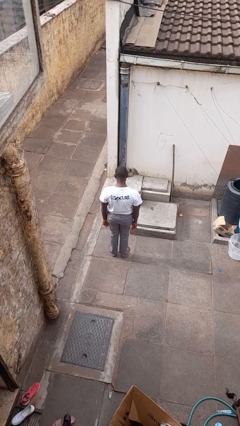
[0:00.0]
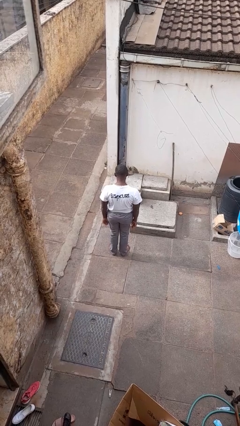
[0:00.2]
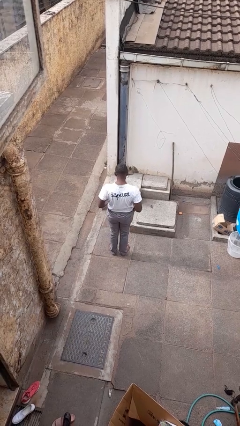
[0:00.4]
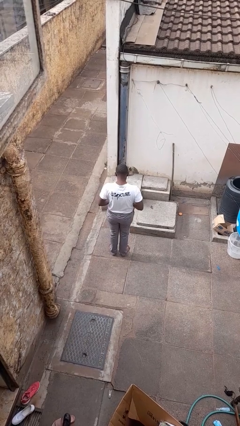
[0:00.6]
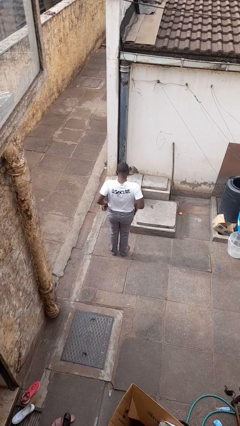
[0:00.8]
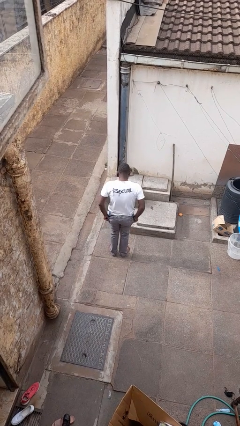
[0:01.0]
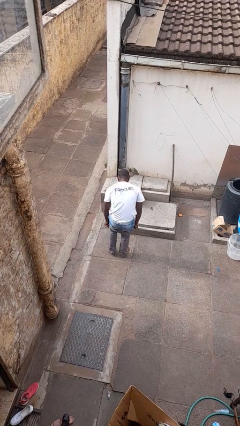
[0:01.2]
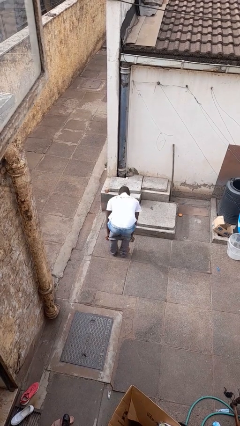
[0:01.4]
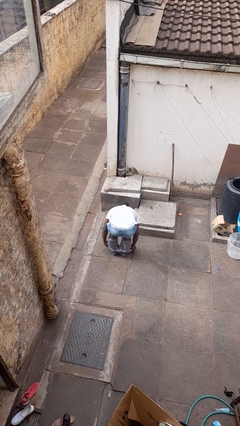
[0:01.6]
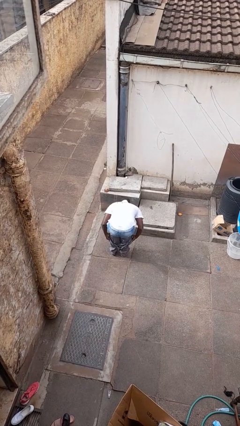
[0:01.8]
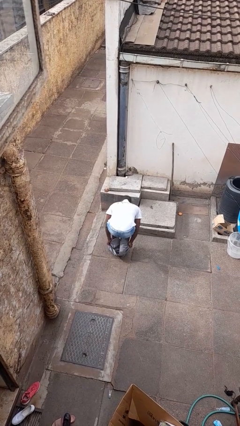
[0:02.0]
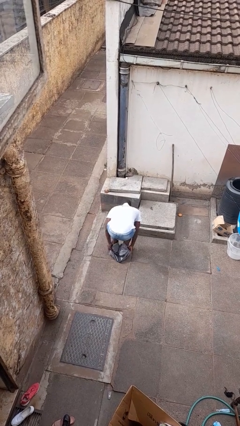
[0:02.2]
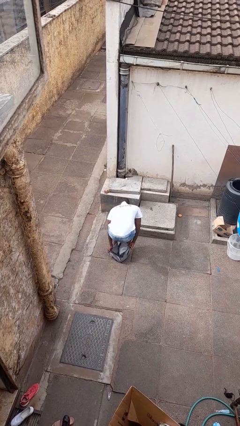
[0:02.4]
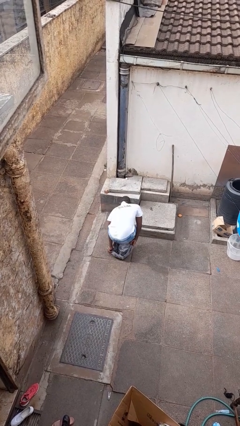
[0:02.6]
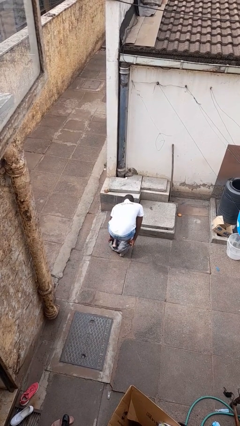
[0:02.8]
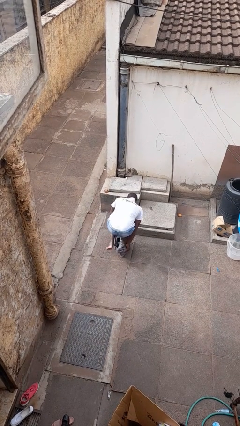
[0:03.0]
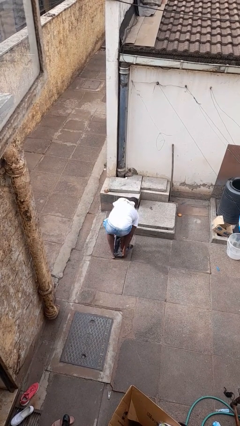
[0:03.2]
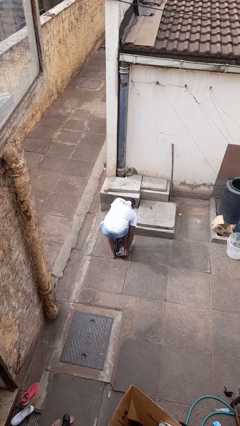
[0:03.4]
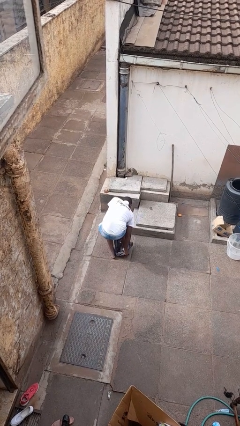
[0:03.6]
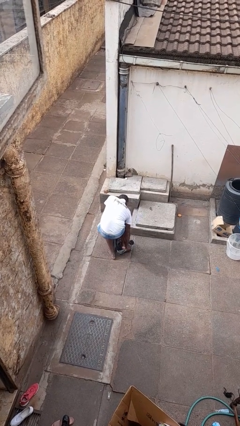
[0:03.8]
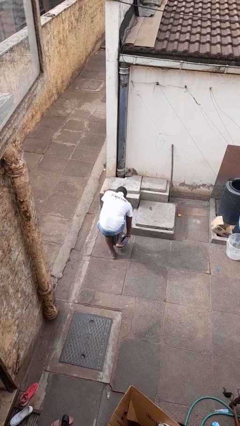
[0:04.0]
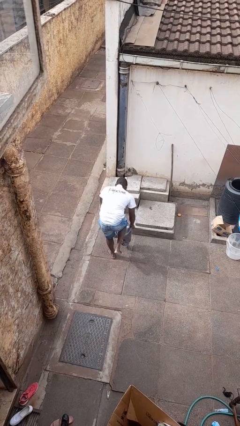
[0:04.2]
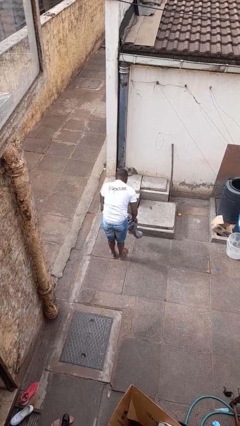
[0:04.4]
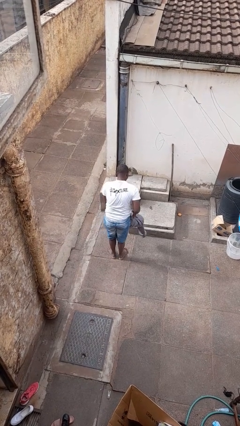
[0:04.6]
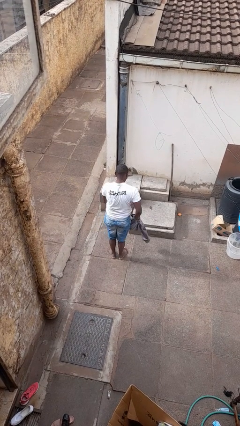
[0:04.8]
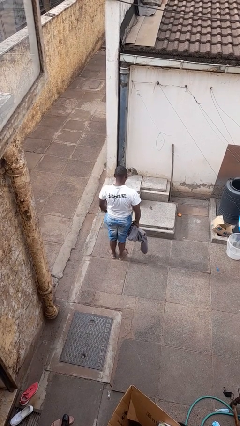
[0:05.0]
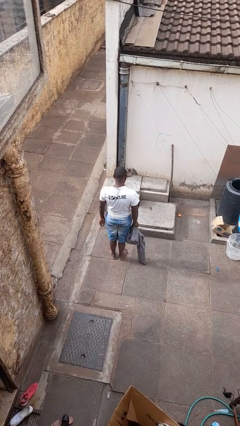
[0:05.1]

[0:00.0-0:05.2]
person takes off pants

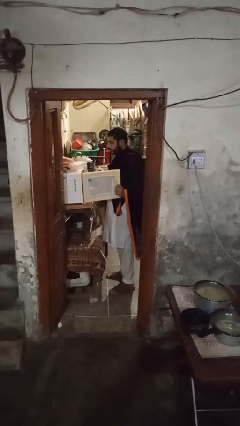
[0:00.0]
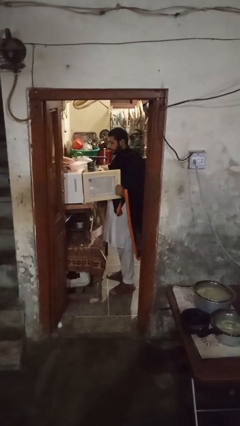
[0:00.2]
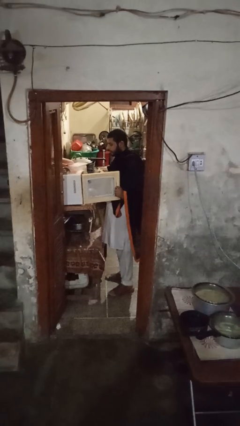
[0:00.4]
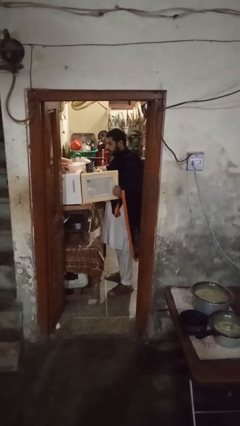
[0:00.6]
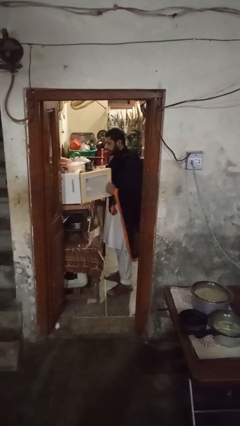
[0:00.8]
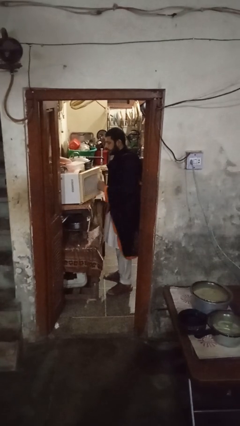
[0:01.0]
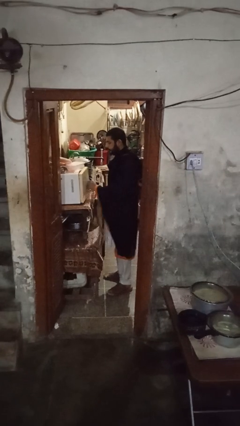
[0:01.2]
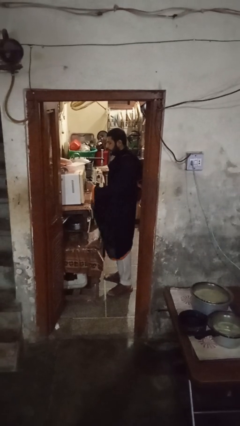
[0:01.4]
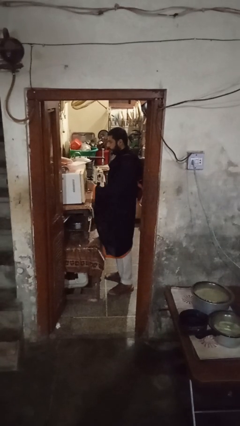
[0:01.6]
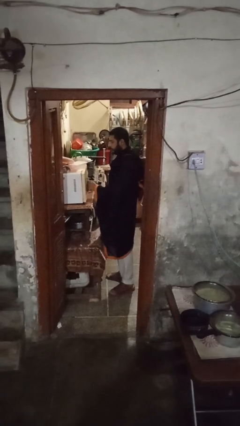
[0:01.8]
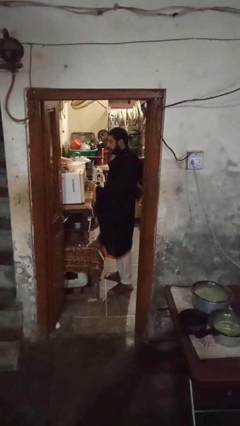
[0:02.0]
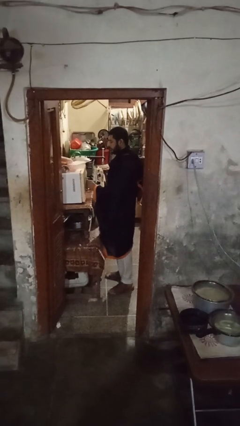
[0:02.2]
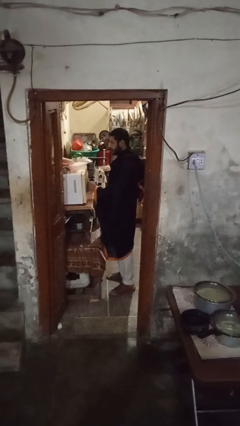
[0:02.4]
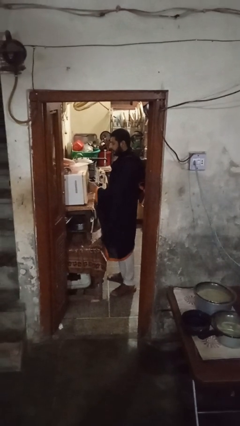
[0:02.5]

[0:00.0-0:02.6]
person closes microwave

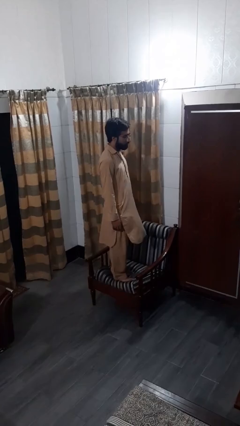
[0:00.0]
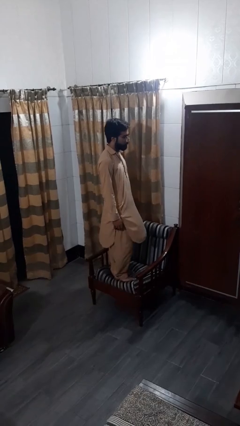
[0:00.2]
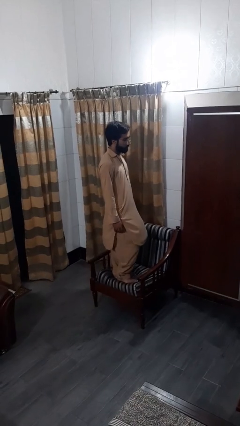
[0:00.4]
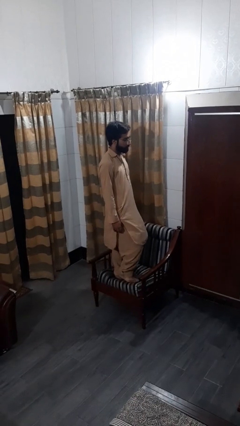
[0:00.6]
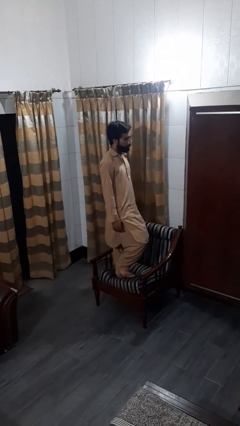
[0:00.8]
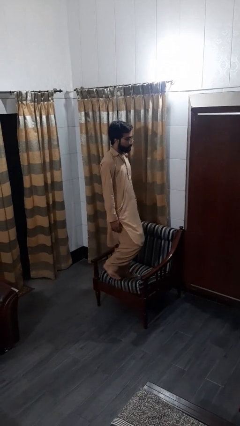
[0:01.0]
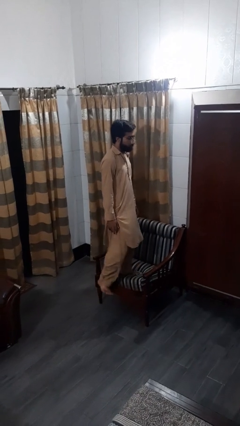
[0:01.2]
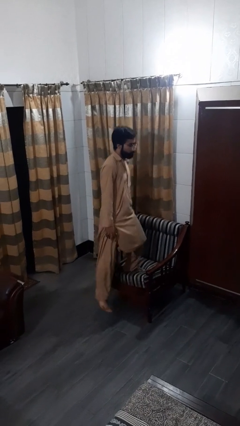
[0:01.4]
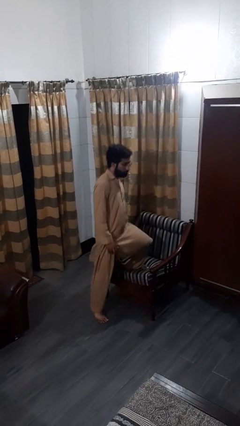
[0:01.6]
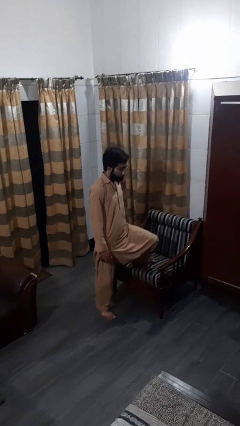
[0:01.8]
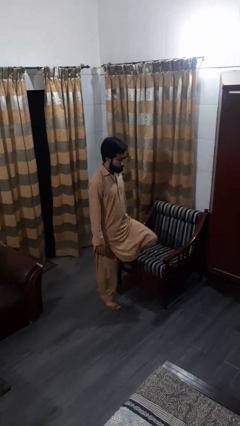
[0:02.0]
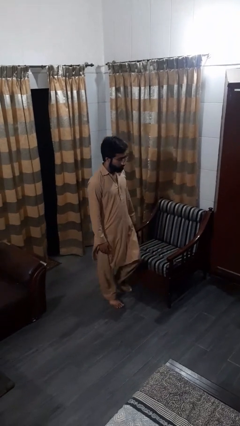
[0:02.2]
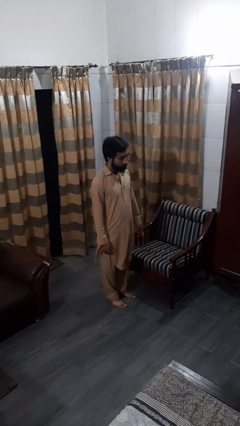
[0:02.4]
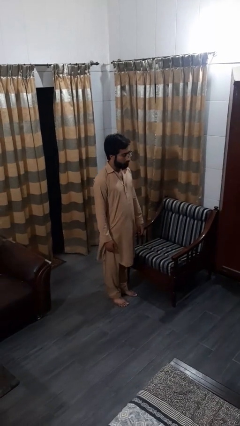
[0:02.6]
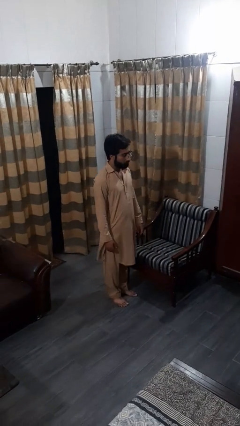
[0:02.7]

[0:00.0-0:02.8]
person climbs off chair

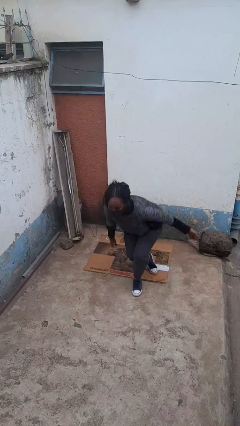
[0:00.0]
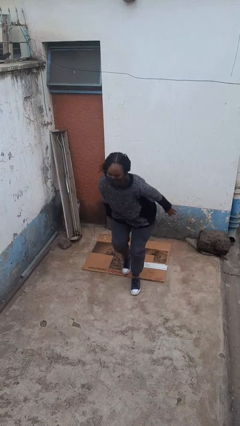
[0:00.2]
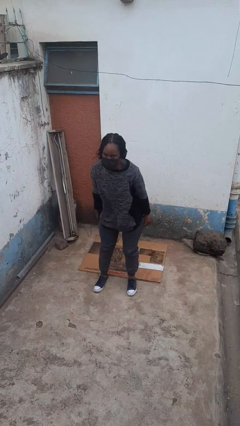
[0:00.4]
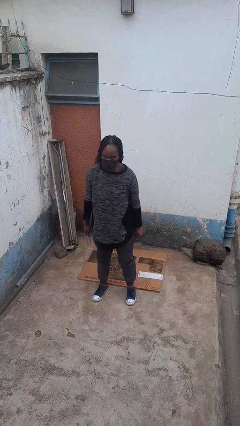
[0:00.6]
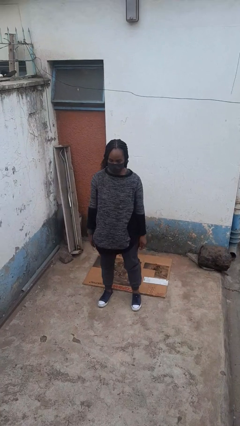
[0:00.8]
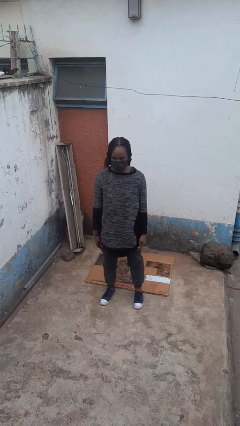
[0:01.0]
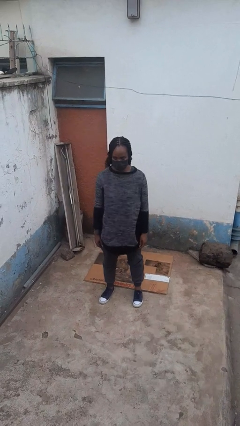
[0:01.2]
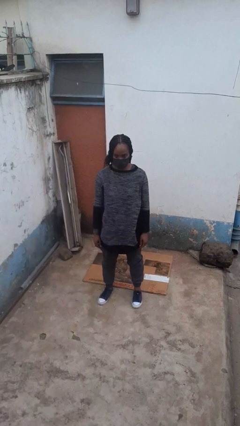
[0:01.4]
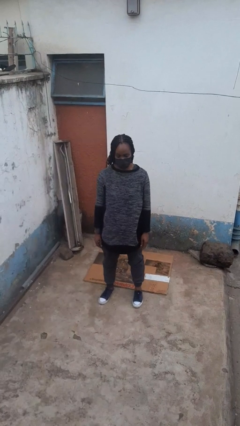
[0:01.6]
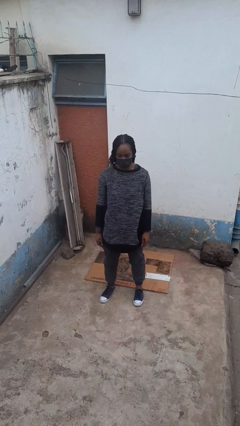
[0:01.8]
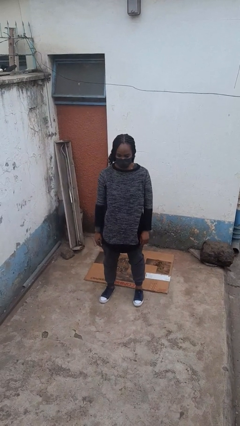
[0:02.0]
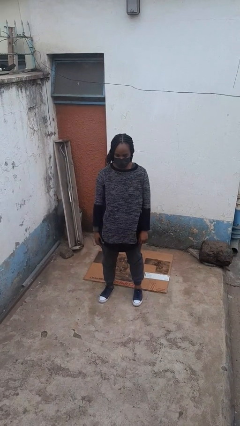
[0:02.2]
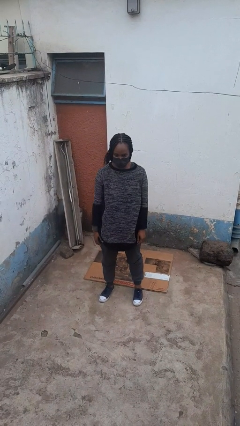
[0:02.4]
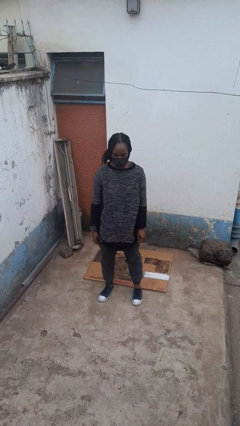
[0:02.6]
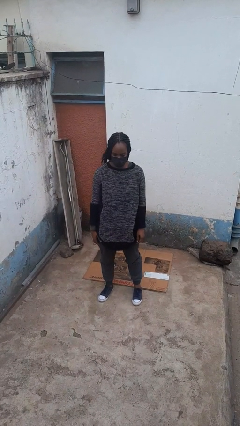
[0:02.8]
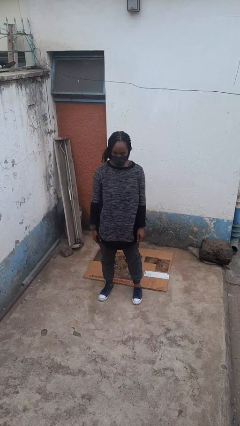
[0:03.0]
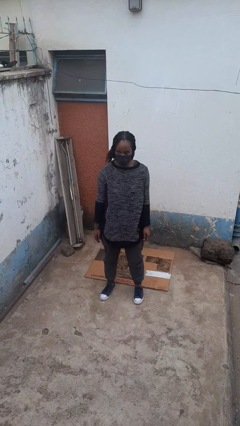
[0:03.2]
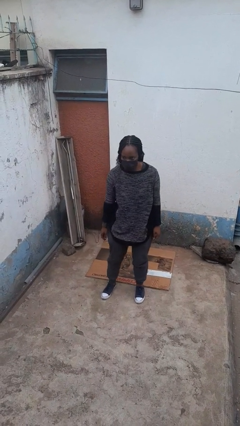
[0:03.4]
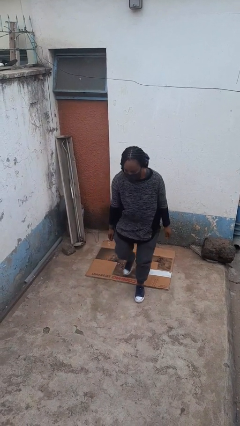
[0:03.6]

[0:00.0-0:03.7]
person stands up from floor

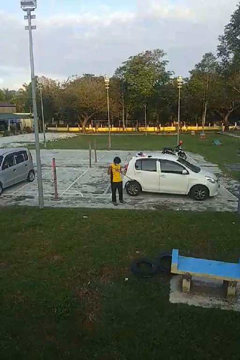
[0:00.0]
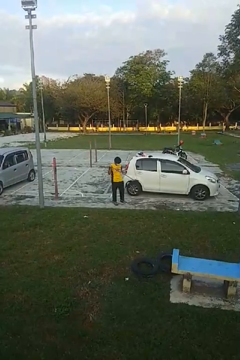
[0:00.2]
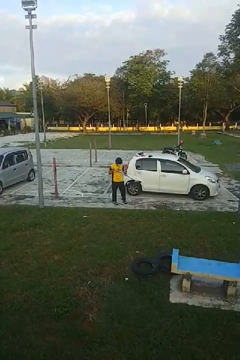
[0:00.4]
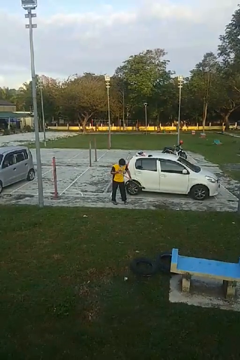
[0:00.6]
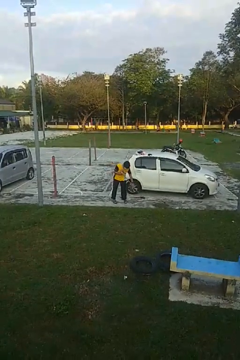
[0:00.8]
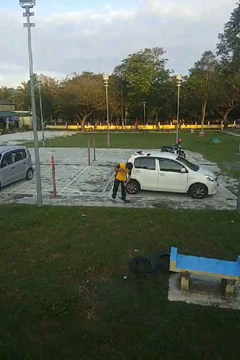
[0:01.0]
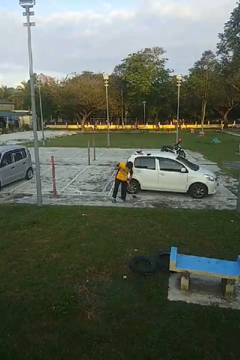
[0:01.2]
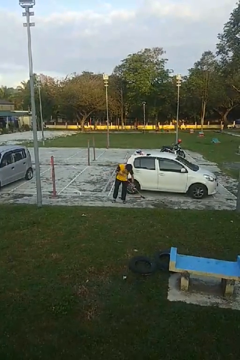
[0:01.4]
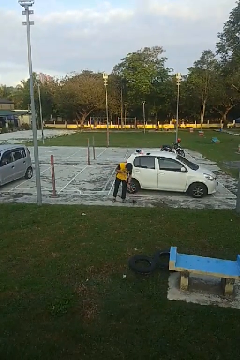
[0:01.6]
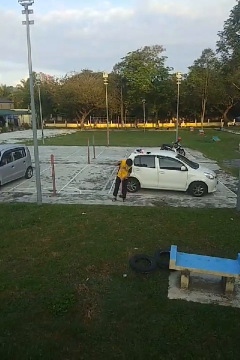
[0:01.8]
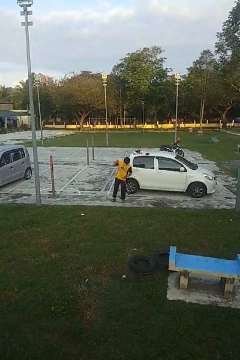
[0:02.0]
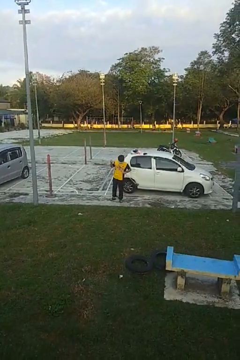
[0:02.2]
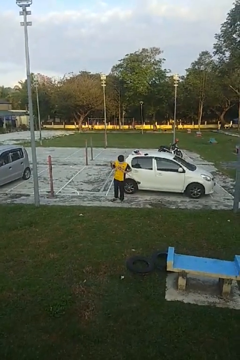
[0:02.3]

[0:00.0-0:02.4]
person sweeps floor

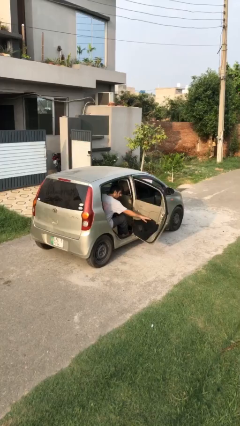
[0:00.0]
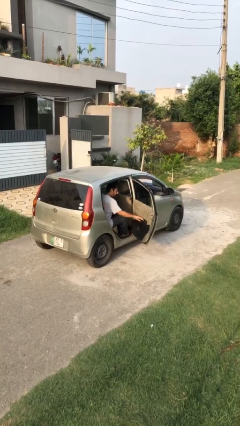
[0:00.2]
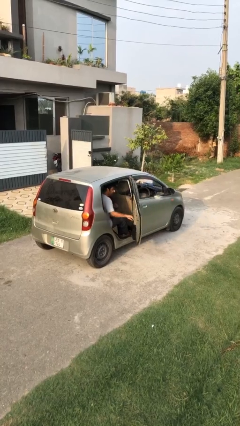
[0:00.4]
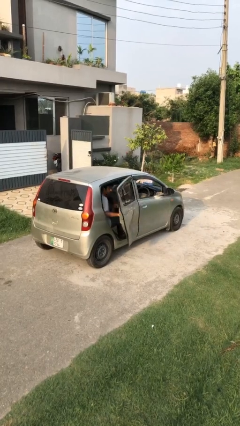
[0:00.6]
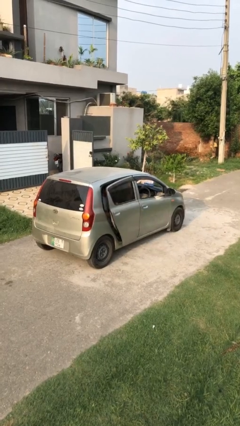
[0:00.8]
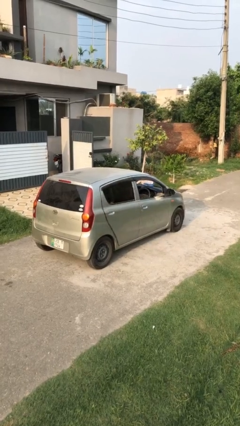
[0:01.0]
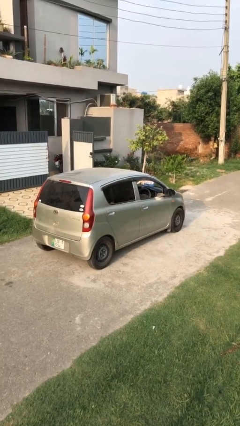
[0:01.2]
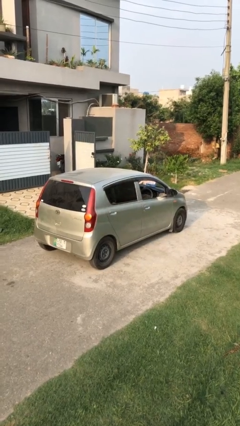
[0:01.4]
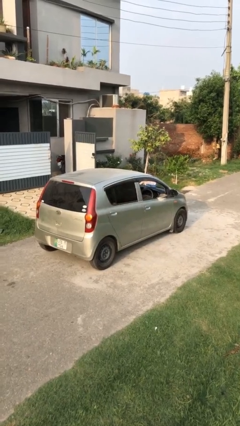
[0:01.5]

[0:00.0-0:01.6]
person closes car door
